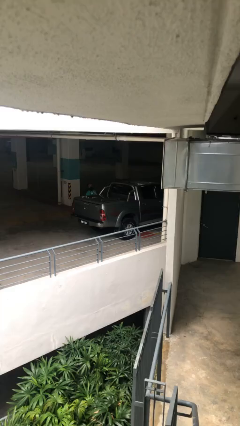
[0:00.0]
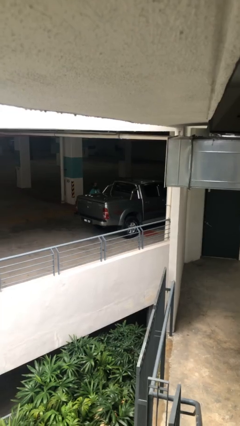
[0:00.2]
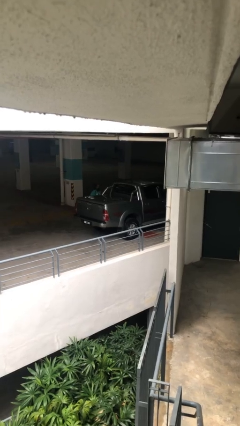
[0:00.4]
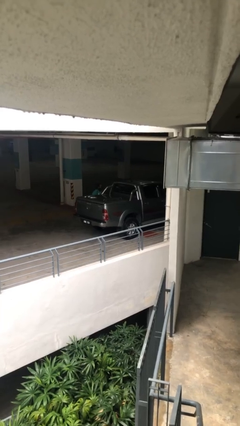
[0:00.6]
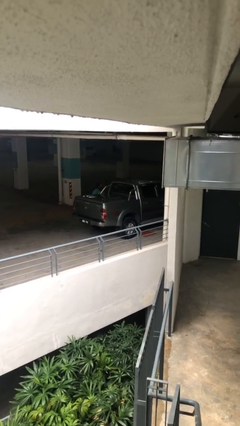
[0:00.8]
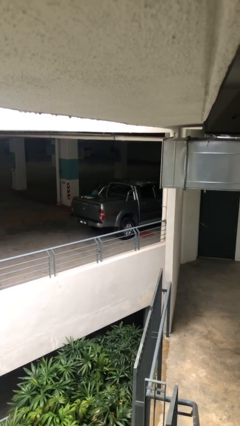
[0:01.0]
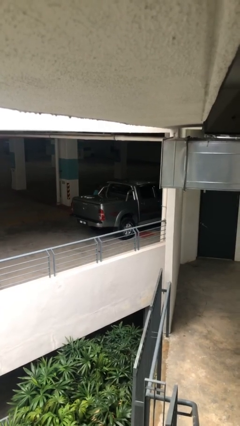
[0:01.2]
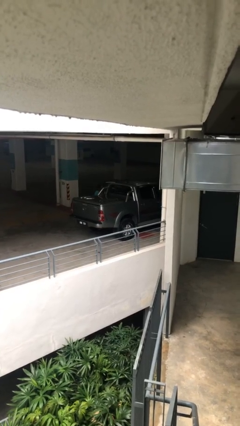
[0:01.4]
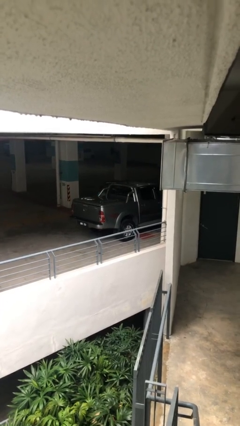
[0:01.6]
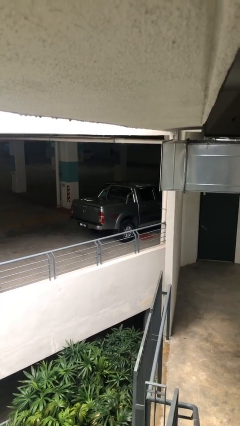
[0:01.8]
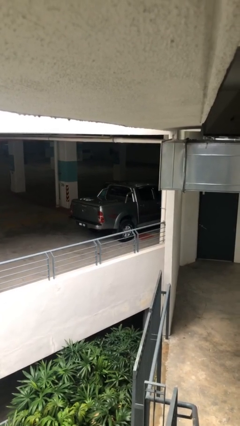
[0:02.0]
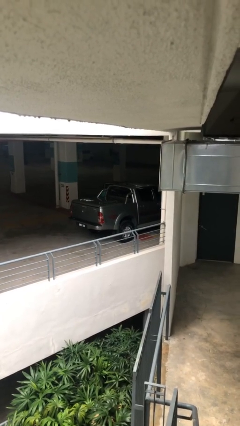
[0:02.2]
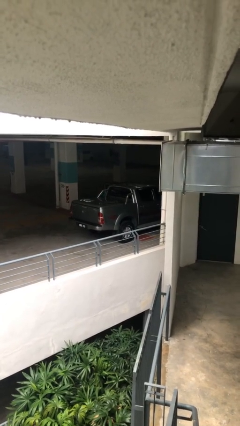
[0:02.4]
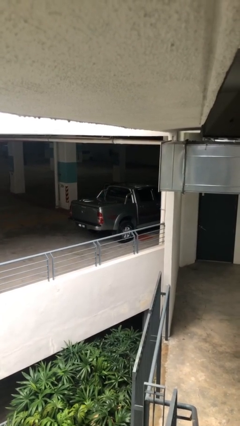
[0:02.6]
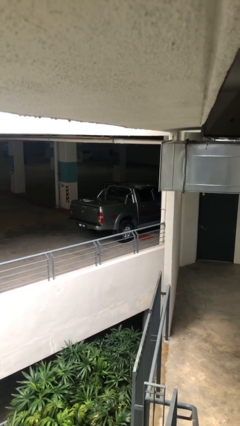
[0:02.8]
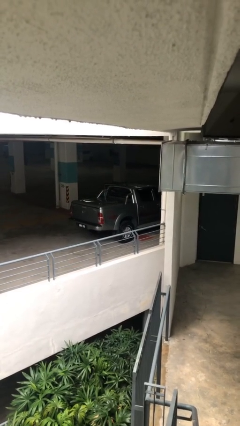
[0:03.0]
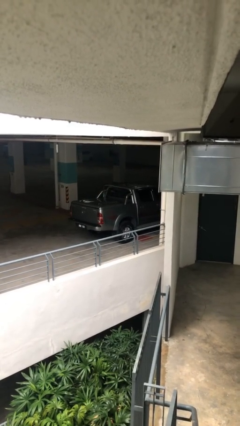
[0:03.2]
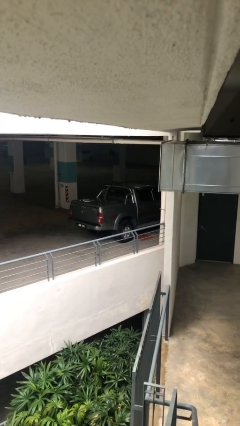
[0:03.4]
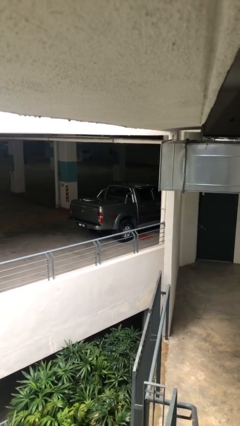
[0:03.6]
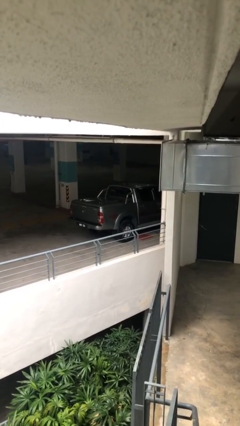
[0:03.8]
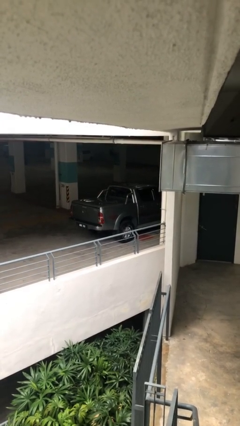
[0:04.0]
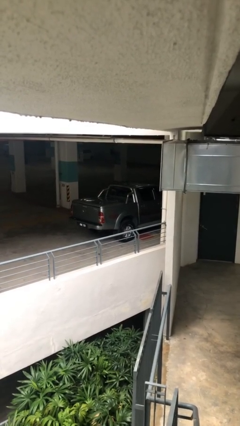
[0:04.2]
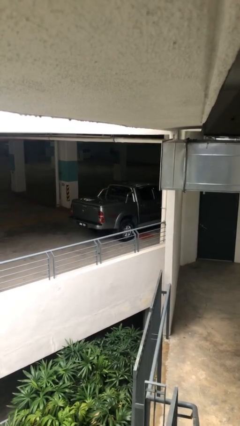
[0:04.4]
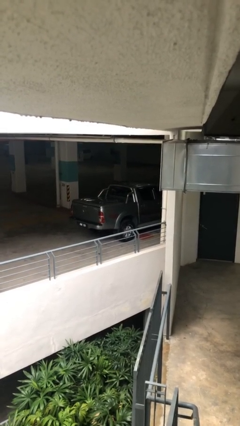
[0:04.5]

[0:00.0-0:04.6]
car picks up person

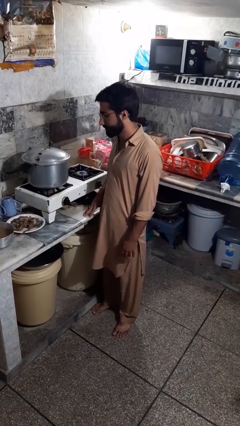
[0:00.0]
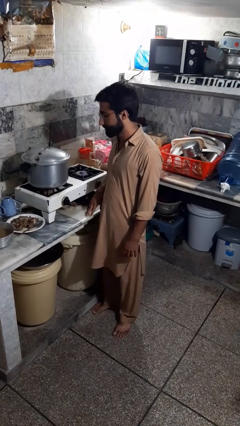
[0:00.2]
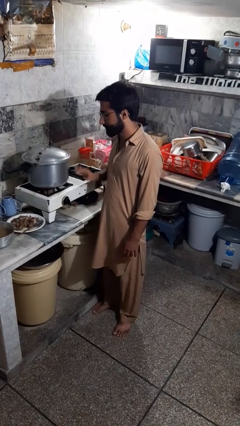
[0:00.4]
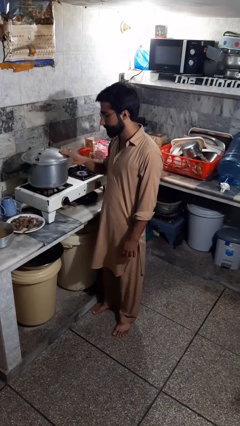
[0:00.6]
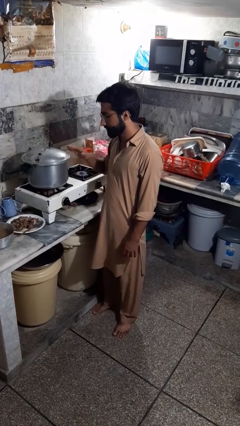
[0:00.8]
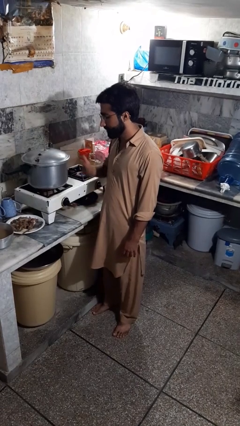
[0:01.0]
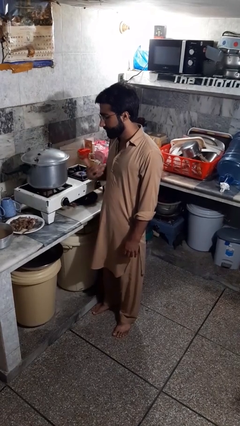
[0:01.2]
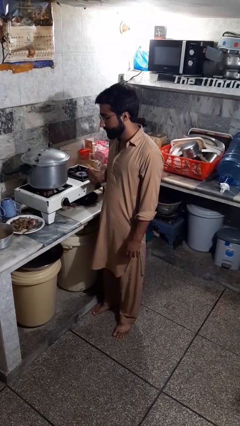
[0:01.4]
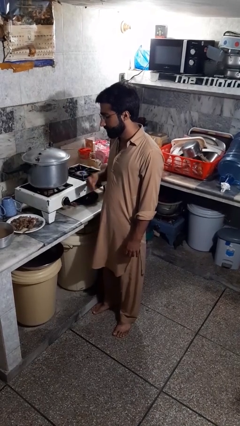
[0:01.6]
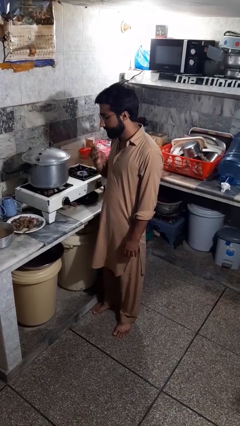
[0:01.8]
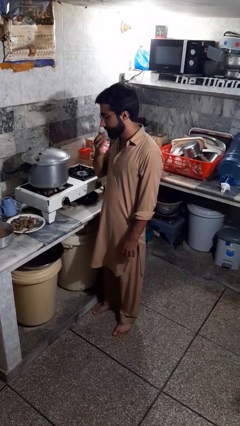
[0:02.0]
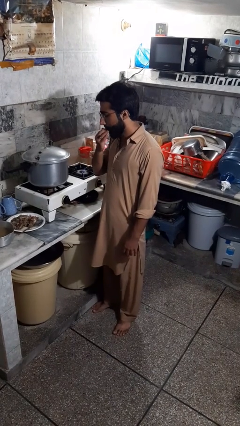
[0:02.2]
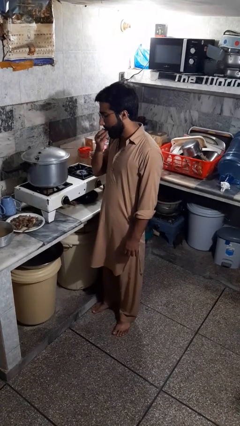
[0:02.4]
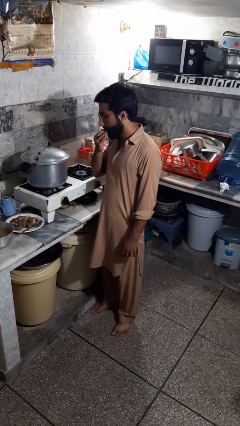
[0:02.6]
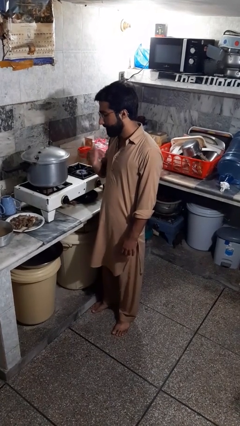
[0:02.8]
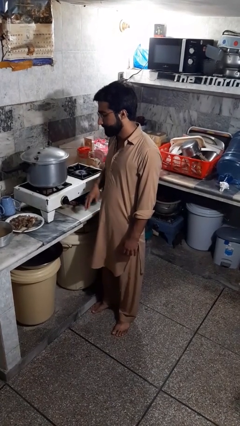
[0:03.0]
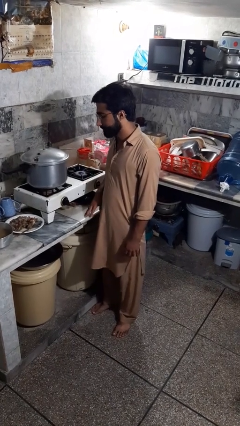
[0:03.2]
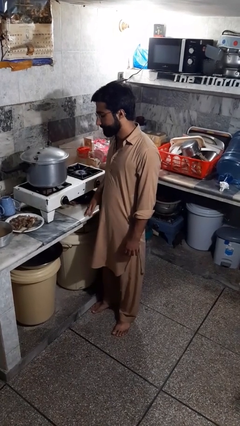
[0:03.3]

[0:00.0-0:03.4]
person burns hand

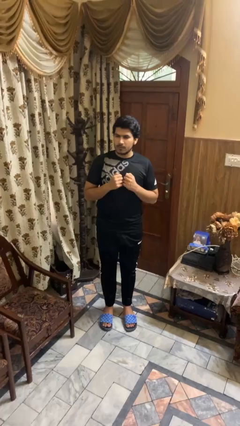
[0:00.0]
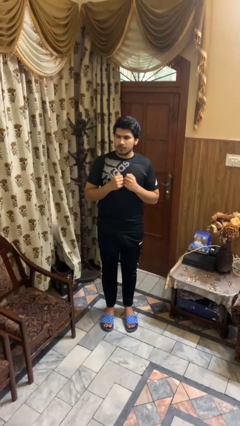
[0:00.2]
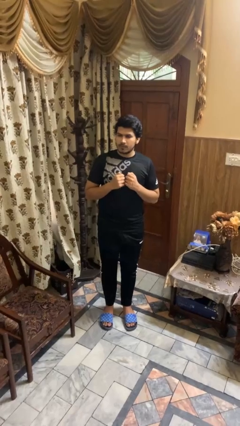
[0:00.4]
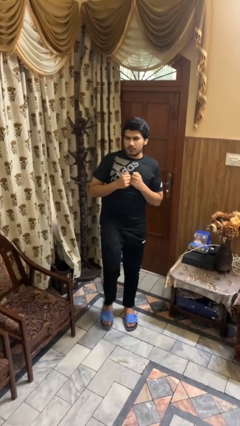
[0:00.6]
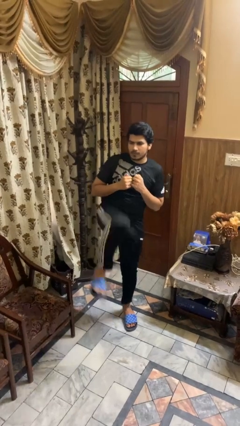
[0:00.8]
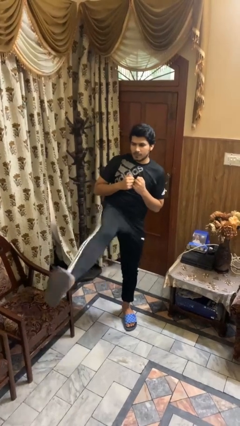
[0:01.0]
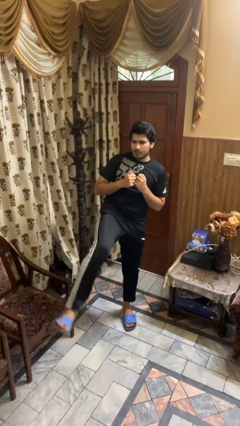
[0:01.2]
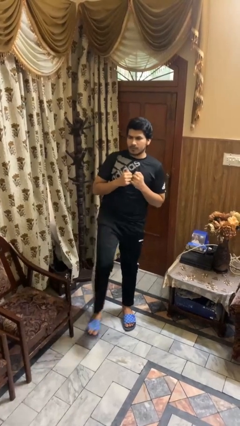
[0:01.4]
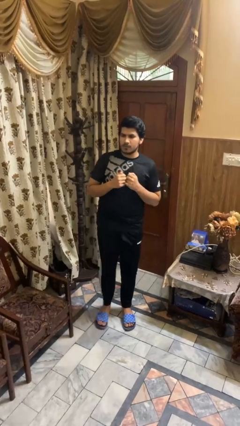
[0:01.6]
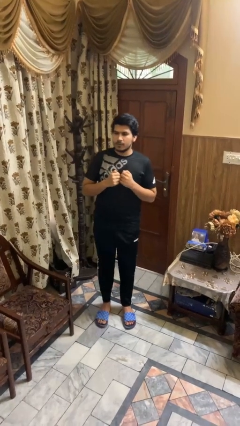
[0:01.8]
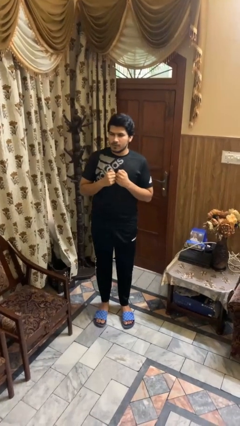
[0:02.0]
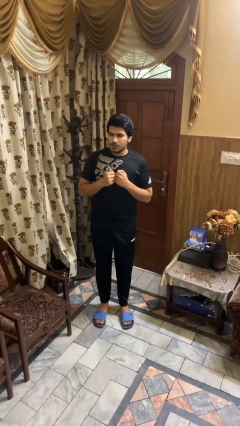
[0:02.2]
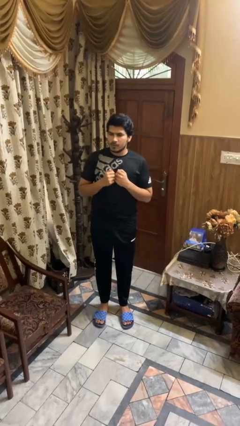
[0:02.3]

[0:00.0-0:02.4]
person karate kicks

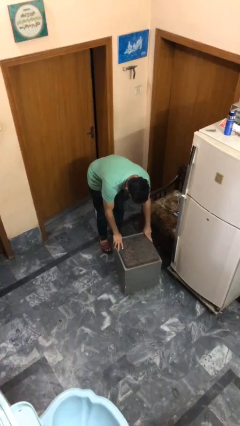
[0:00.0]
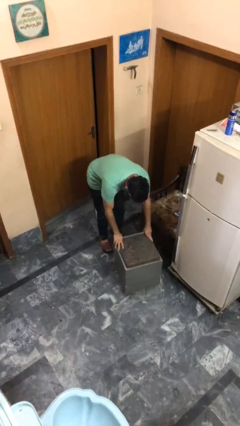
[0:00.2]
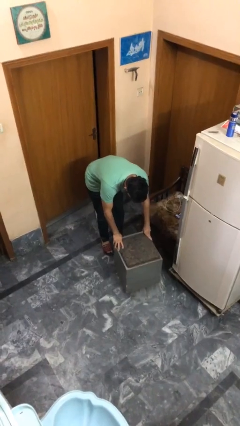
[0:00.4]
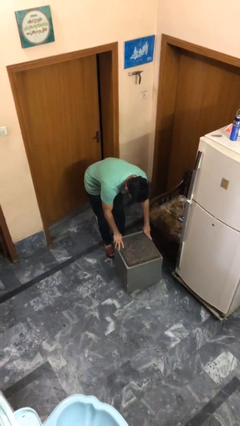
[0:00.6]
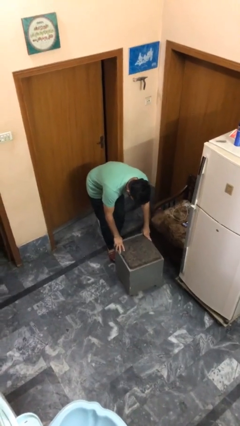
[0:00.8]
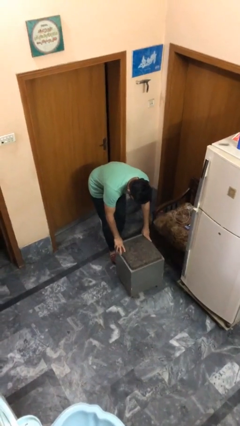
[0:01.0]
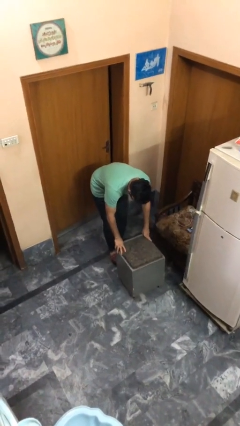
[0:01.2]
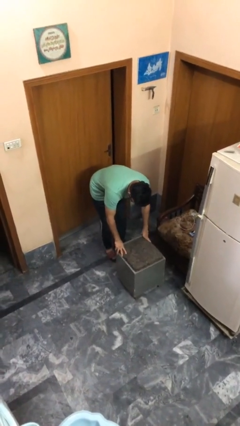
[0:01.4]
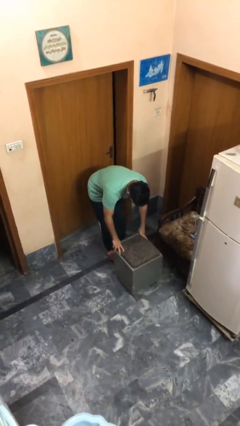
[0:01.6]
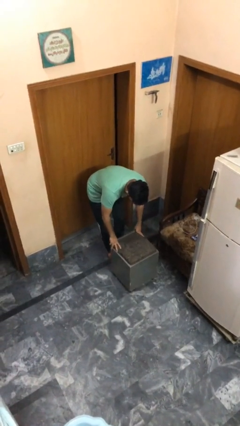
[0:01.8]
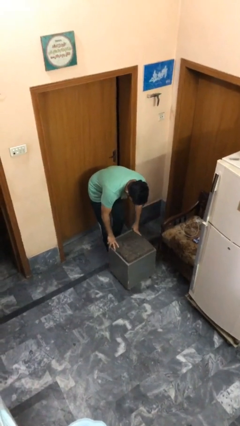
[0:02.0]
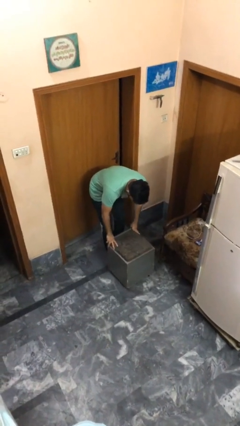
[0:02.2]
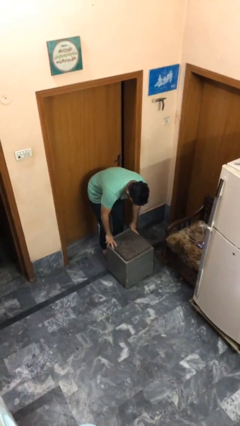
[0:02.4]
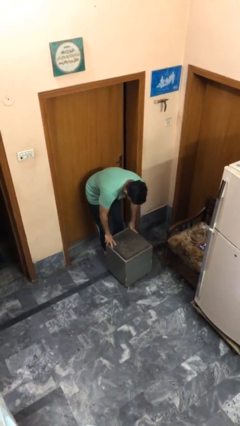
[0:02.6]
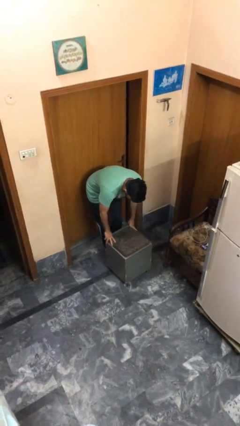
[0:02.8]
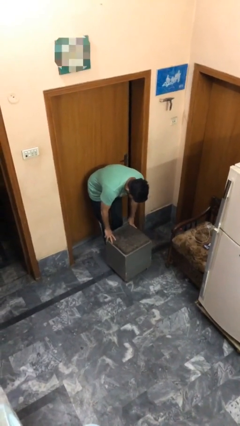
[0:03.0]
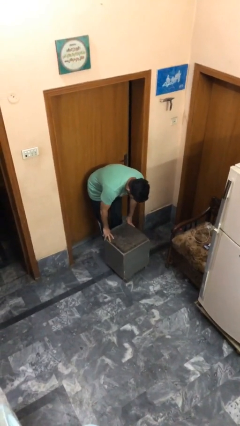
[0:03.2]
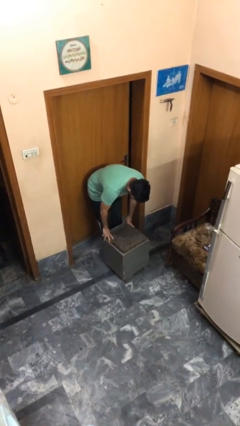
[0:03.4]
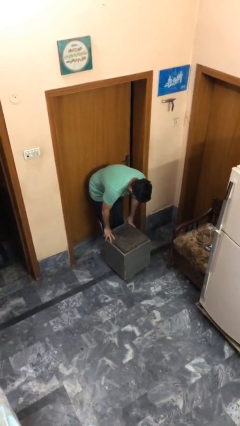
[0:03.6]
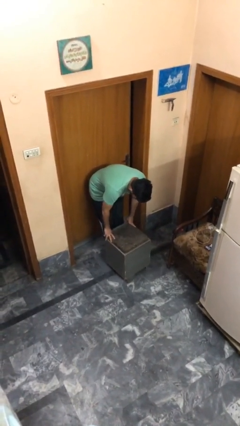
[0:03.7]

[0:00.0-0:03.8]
person pulls wheeled cart

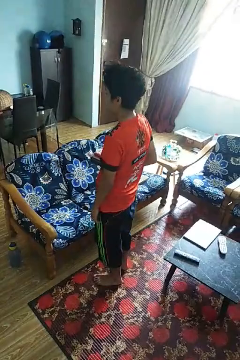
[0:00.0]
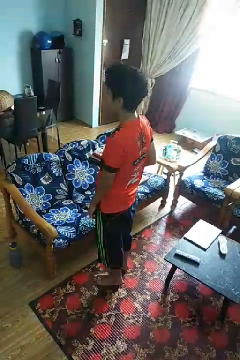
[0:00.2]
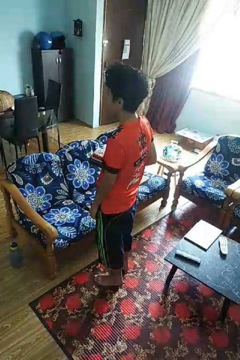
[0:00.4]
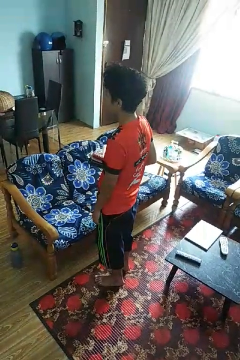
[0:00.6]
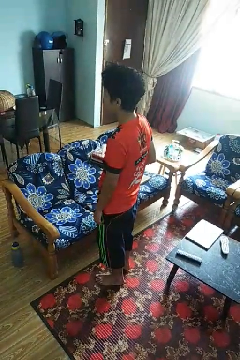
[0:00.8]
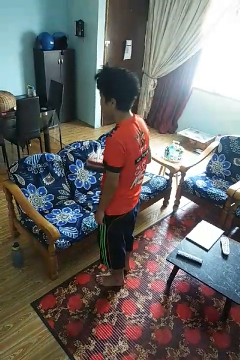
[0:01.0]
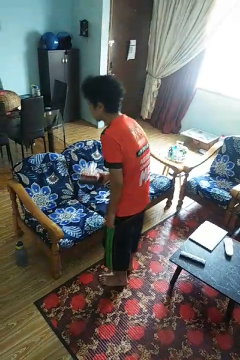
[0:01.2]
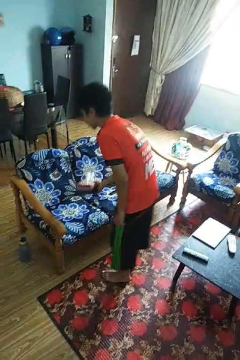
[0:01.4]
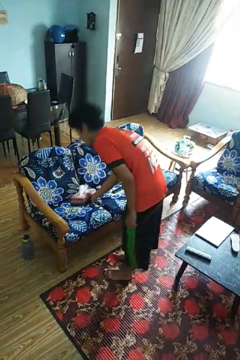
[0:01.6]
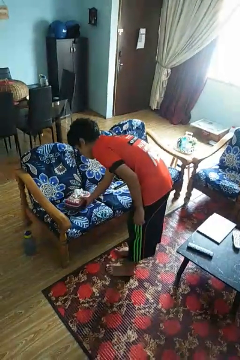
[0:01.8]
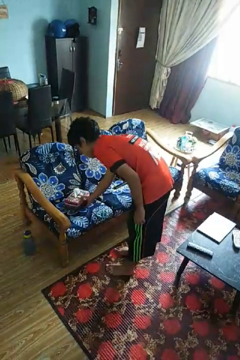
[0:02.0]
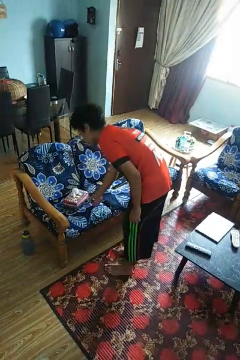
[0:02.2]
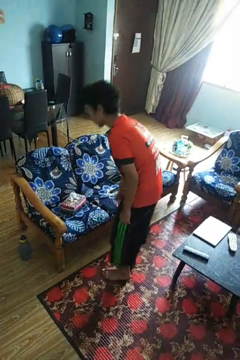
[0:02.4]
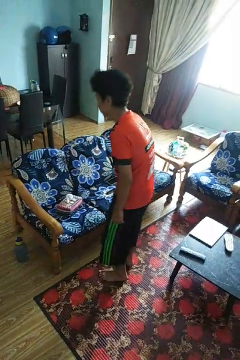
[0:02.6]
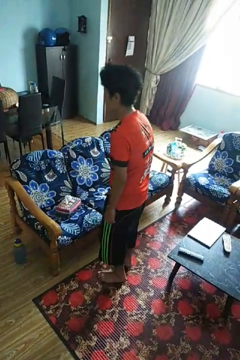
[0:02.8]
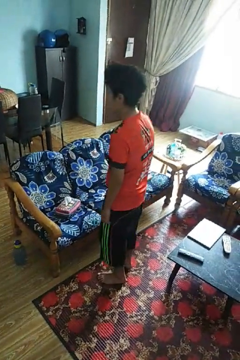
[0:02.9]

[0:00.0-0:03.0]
person puts down object on couch

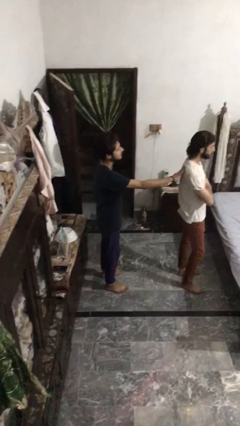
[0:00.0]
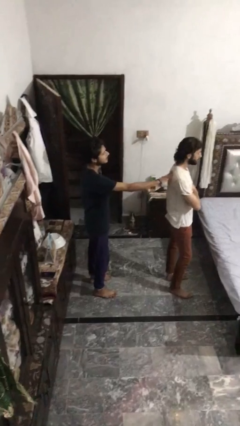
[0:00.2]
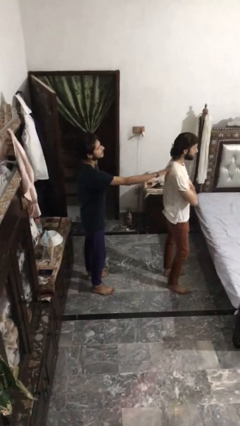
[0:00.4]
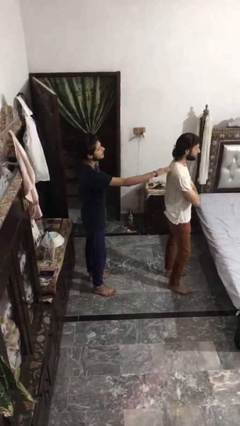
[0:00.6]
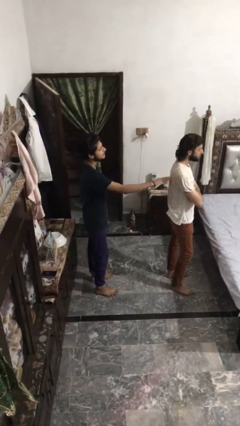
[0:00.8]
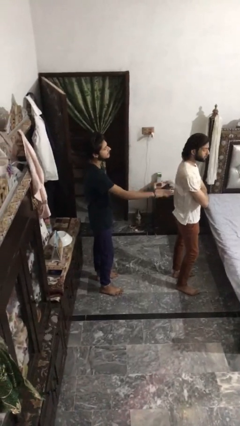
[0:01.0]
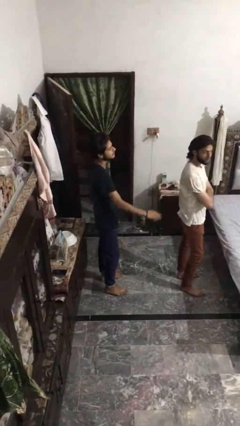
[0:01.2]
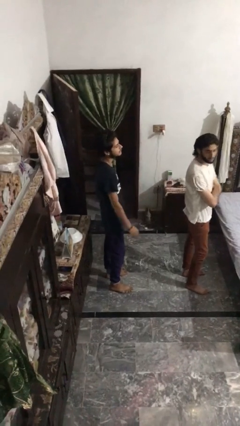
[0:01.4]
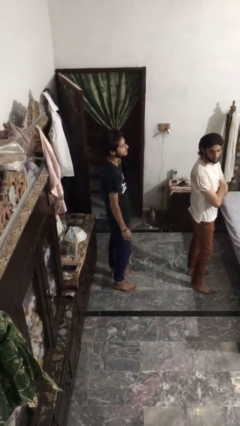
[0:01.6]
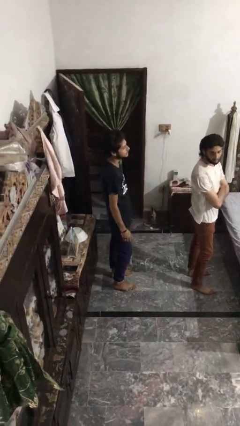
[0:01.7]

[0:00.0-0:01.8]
person touches back of person
